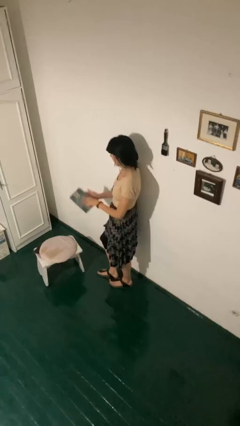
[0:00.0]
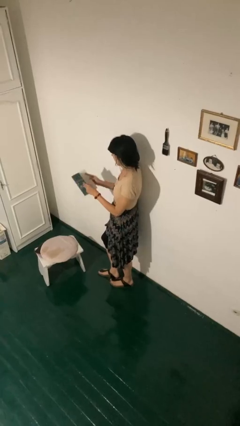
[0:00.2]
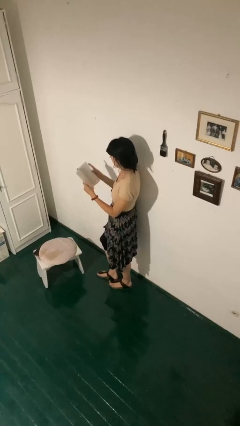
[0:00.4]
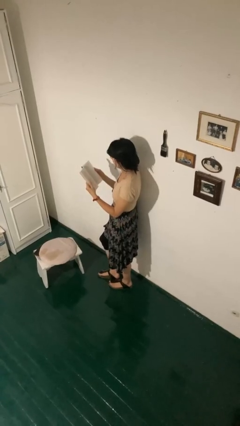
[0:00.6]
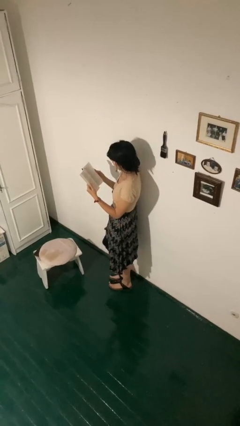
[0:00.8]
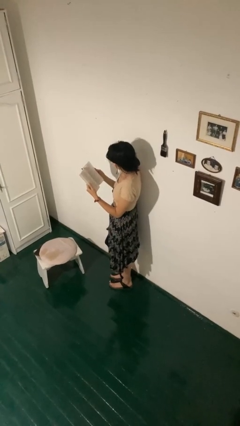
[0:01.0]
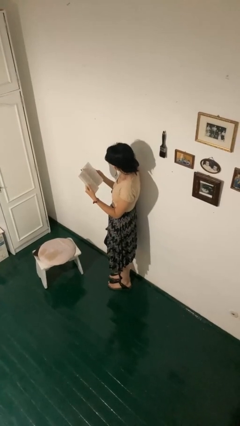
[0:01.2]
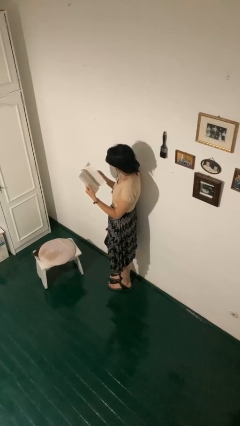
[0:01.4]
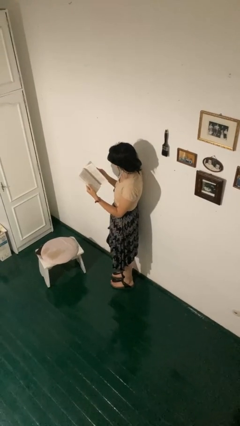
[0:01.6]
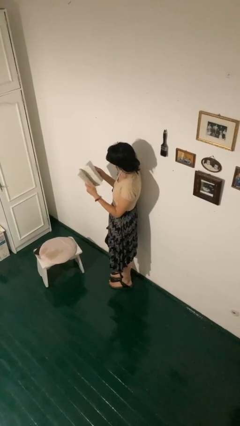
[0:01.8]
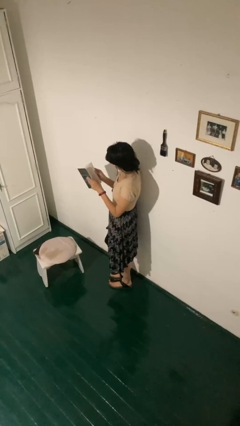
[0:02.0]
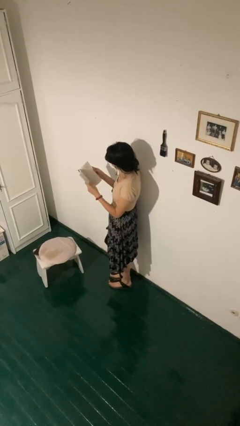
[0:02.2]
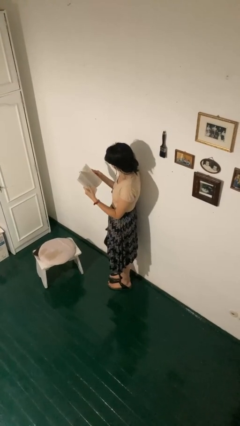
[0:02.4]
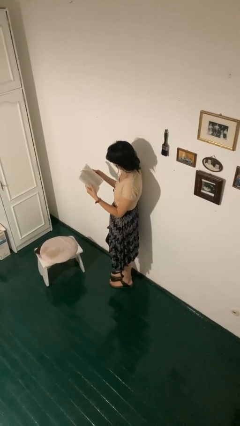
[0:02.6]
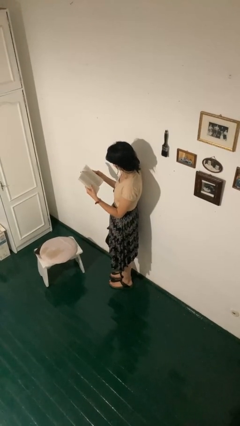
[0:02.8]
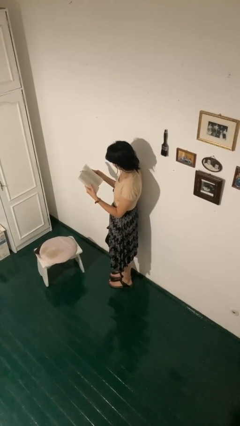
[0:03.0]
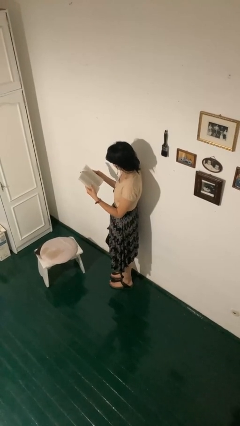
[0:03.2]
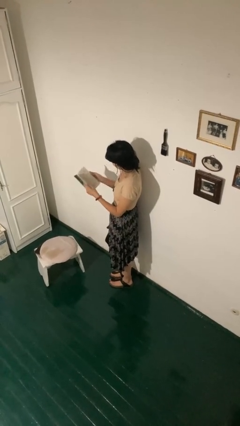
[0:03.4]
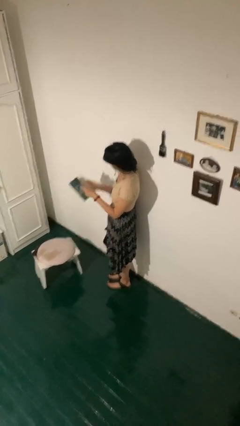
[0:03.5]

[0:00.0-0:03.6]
person reads book

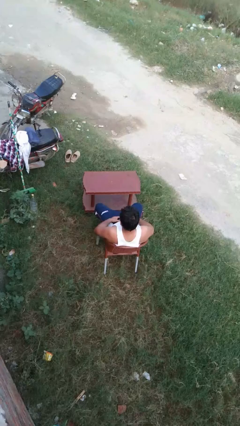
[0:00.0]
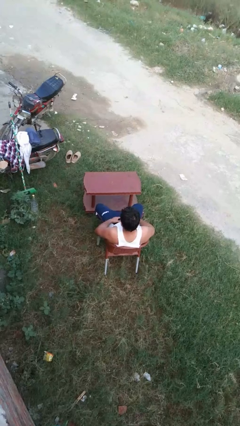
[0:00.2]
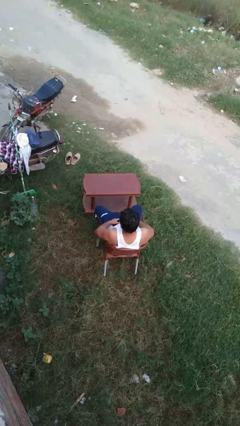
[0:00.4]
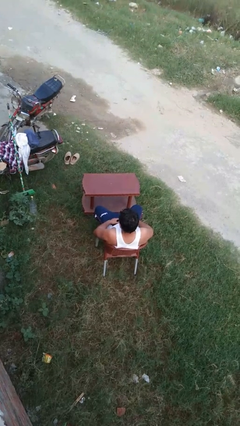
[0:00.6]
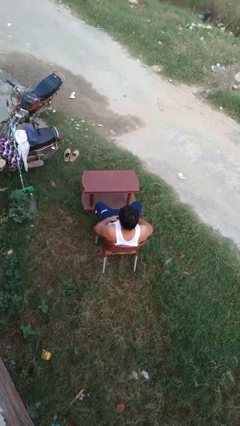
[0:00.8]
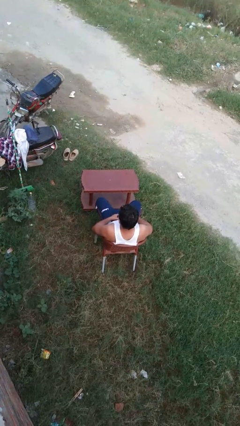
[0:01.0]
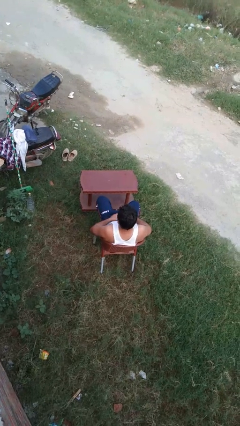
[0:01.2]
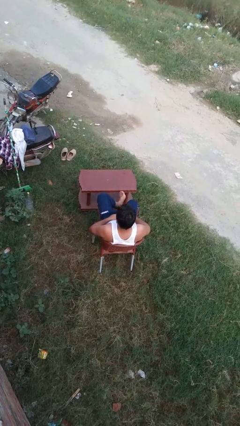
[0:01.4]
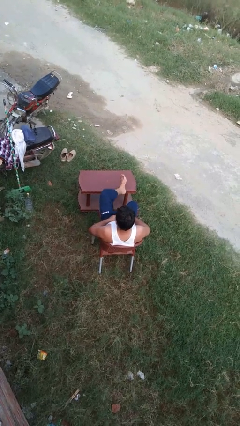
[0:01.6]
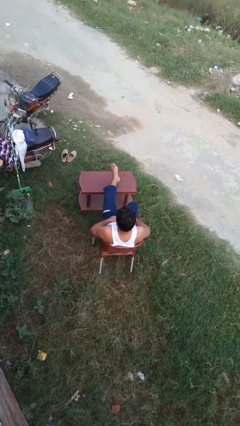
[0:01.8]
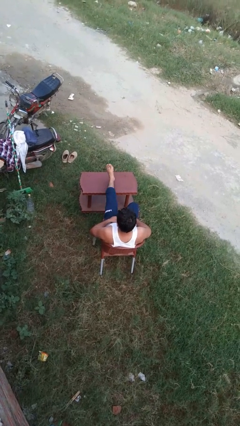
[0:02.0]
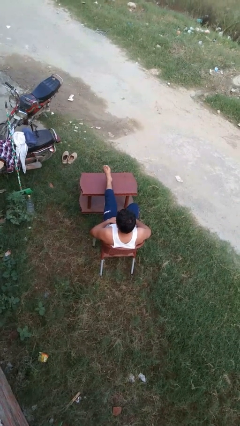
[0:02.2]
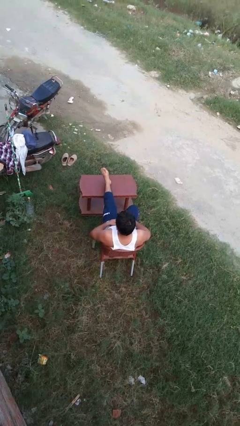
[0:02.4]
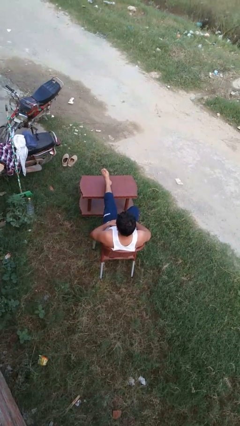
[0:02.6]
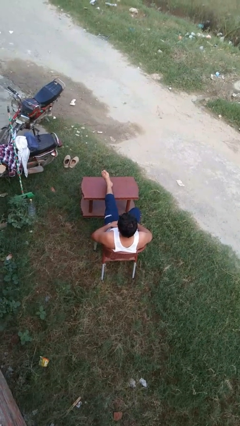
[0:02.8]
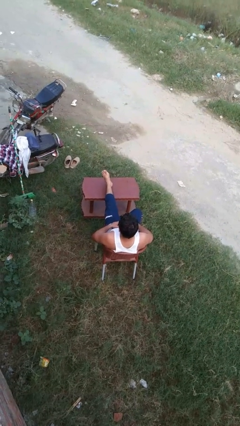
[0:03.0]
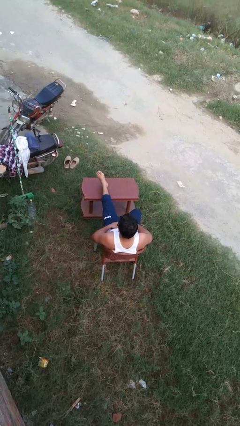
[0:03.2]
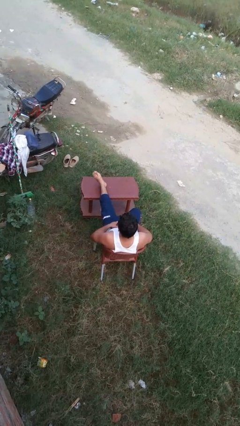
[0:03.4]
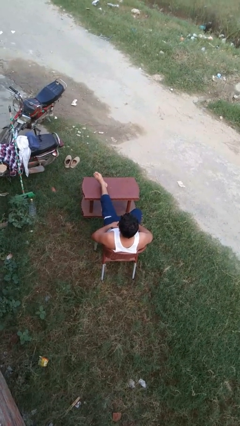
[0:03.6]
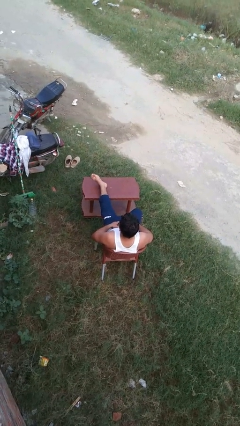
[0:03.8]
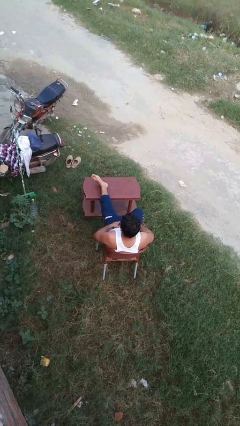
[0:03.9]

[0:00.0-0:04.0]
person puts feet up

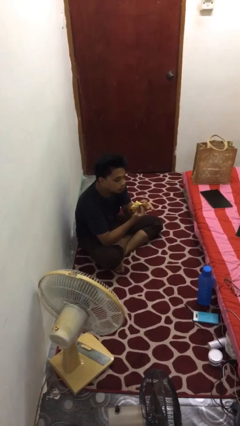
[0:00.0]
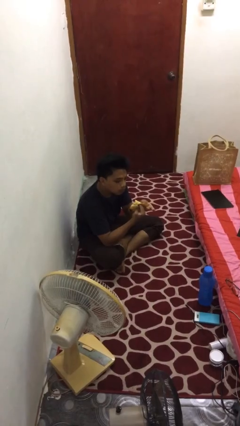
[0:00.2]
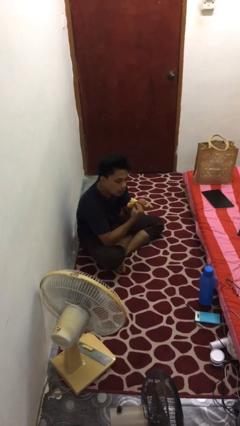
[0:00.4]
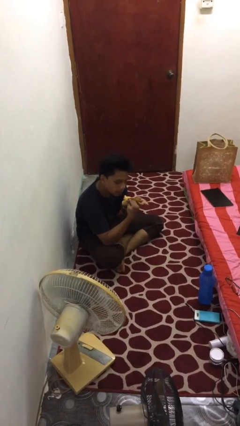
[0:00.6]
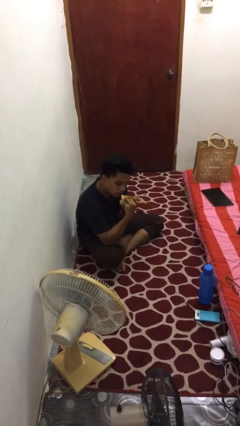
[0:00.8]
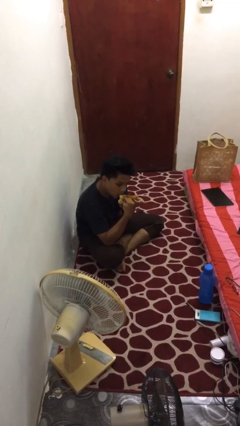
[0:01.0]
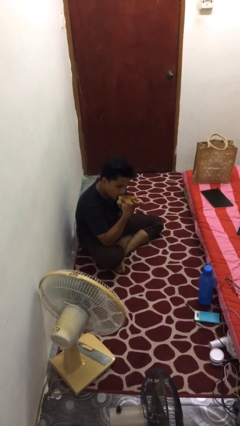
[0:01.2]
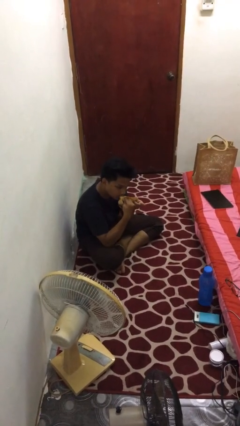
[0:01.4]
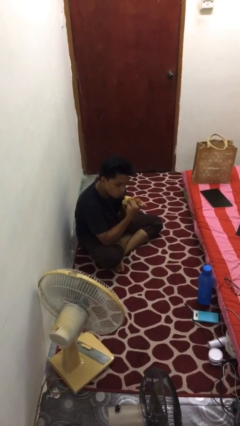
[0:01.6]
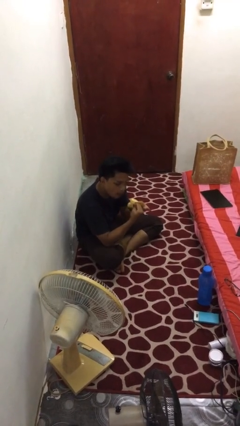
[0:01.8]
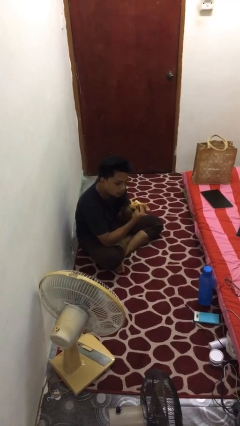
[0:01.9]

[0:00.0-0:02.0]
person eats banana

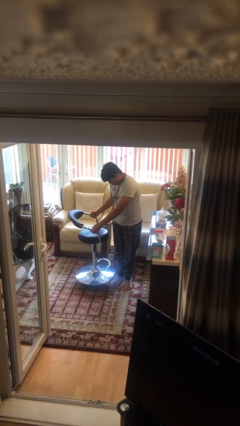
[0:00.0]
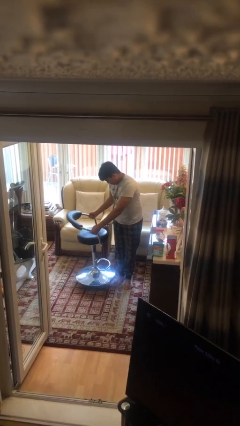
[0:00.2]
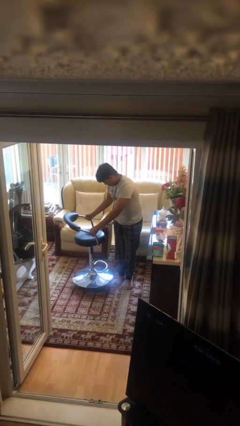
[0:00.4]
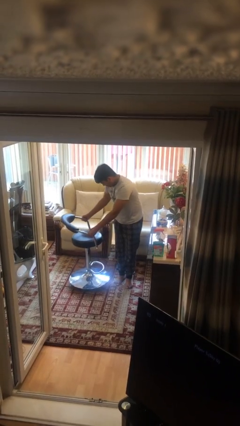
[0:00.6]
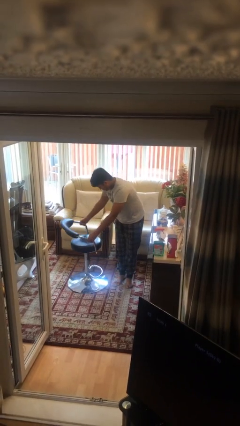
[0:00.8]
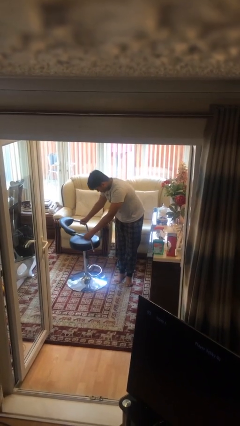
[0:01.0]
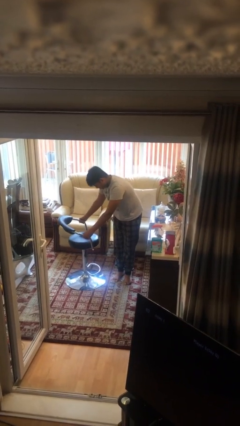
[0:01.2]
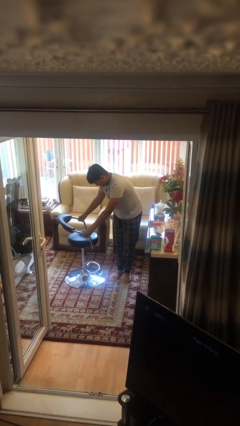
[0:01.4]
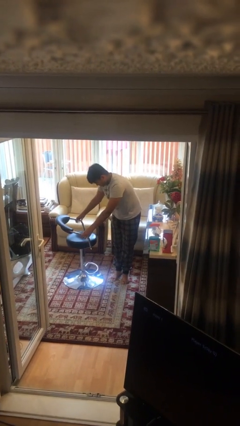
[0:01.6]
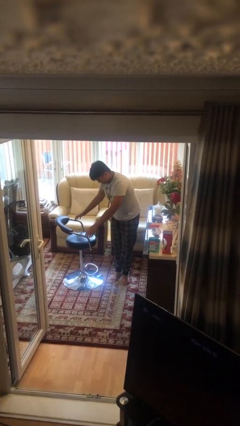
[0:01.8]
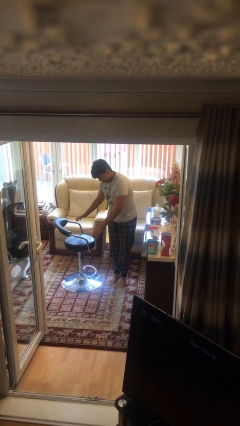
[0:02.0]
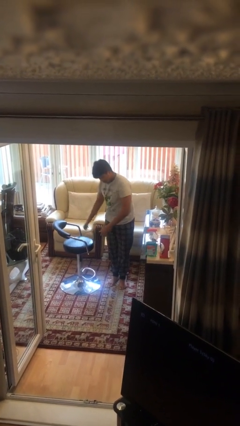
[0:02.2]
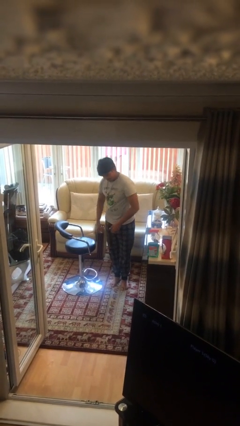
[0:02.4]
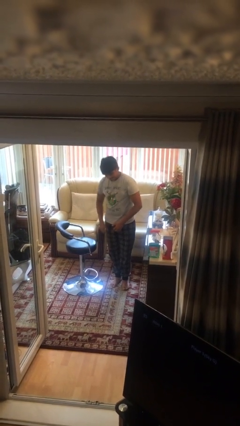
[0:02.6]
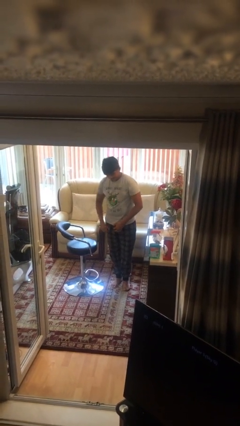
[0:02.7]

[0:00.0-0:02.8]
person puts down object on floor

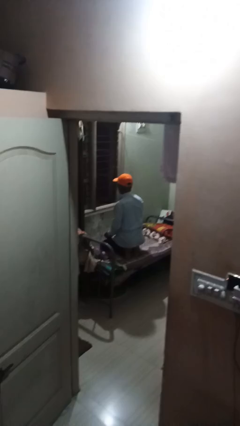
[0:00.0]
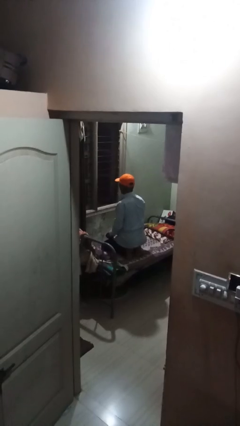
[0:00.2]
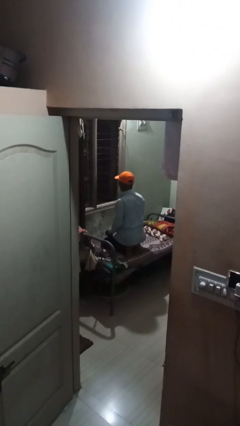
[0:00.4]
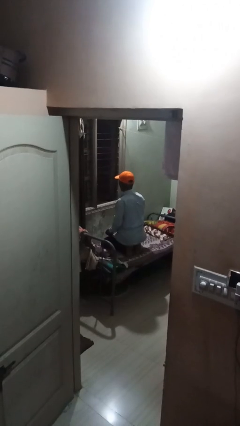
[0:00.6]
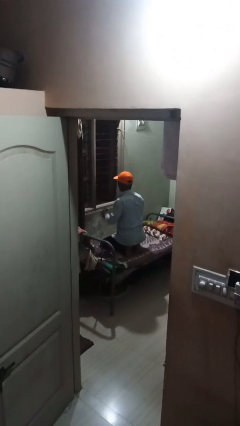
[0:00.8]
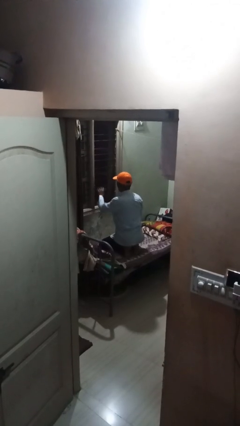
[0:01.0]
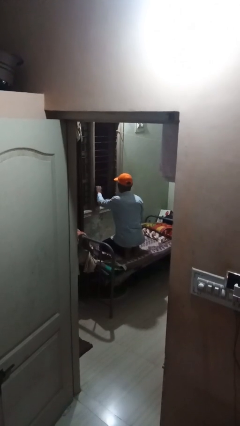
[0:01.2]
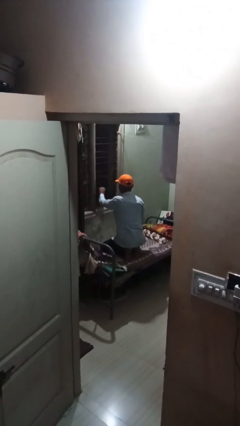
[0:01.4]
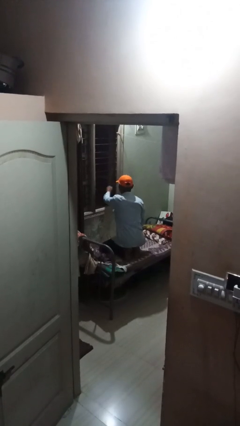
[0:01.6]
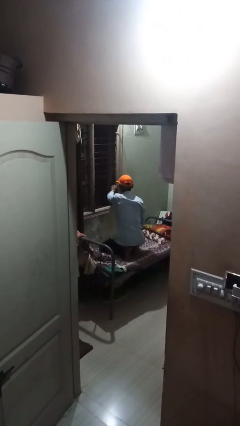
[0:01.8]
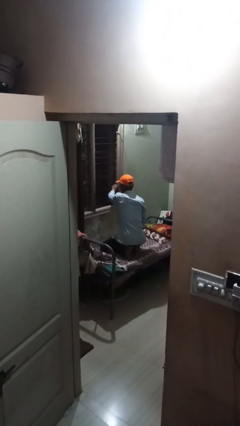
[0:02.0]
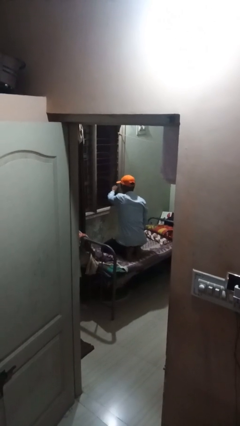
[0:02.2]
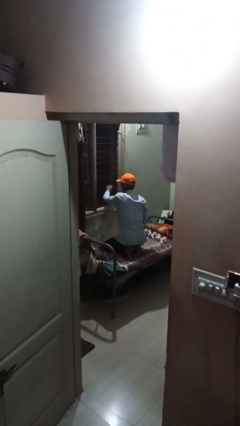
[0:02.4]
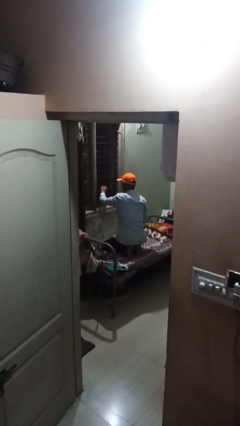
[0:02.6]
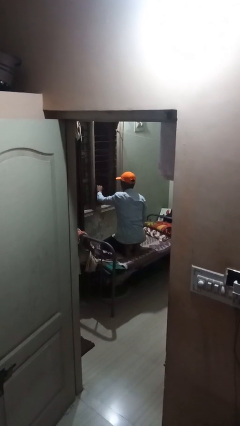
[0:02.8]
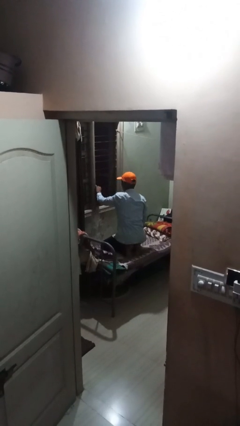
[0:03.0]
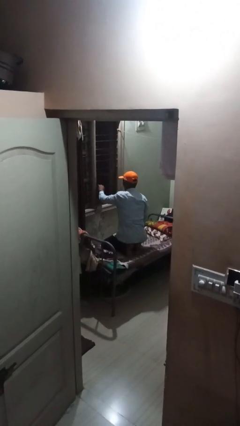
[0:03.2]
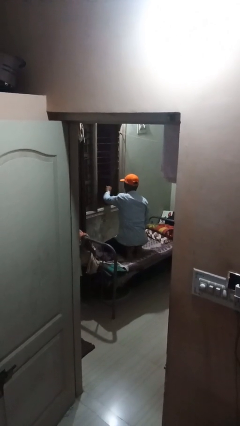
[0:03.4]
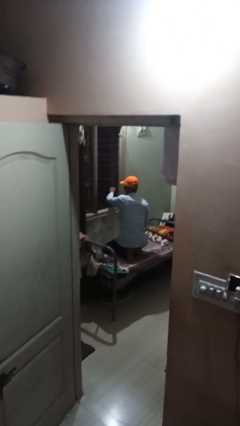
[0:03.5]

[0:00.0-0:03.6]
person washes window

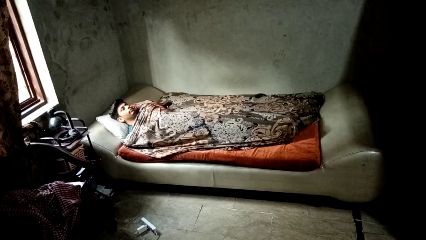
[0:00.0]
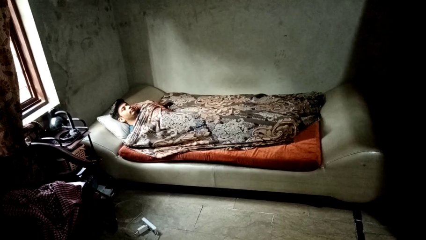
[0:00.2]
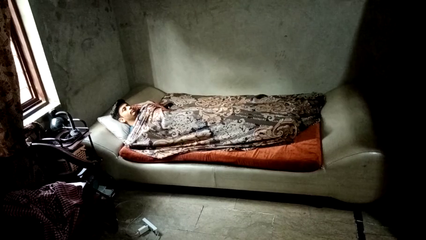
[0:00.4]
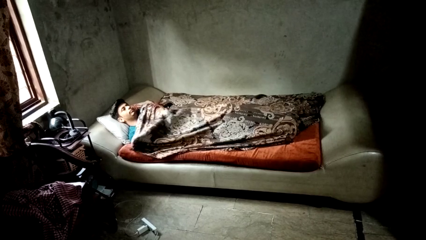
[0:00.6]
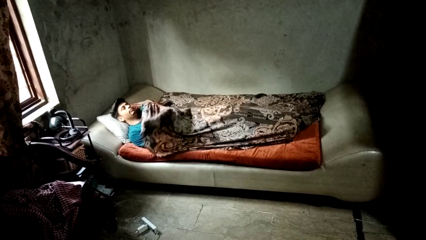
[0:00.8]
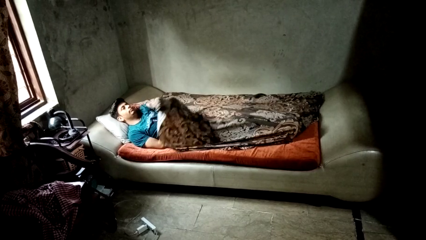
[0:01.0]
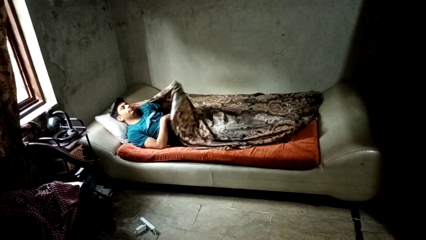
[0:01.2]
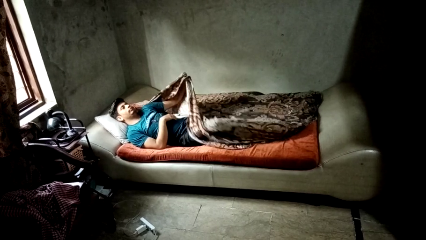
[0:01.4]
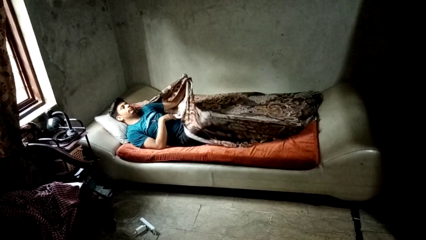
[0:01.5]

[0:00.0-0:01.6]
person uncovers with bedsheets
